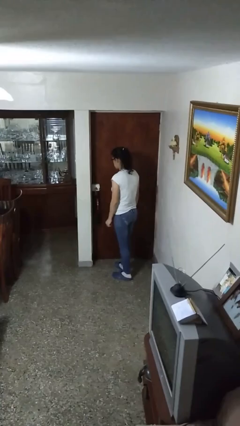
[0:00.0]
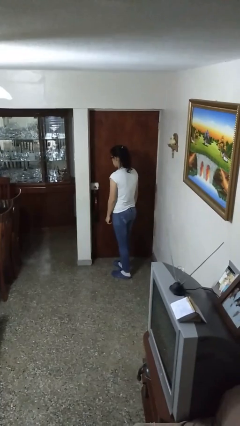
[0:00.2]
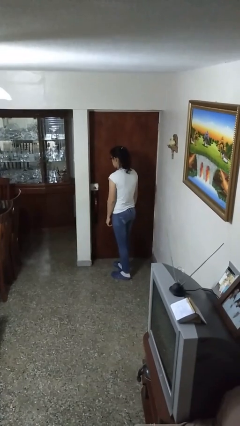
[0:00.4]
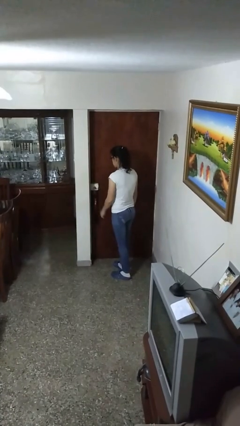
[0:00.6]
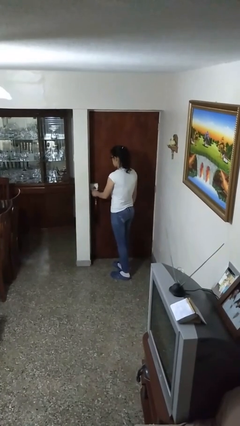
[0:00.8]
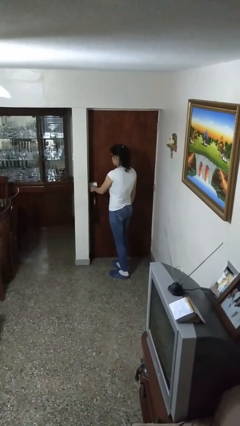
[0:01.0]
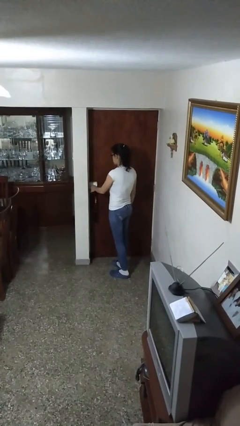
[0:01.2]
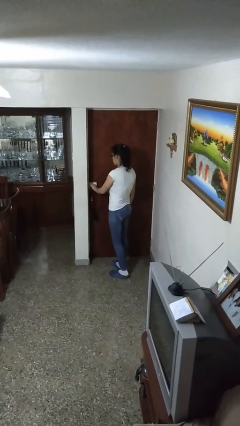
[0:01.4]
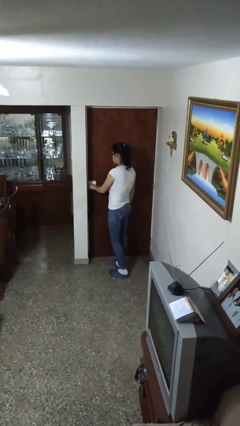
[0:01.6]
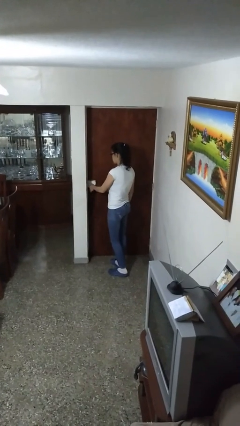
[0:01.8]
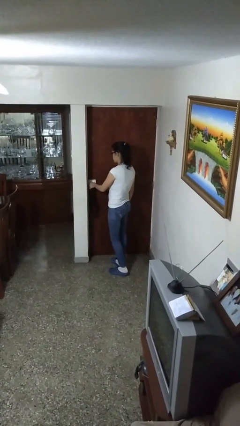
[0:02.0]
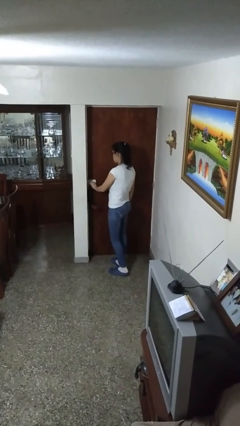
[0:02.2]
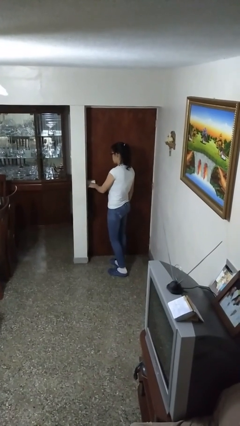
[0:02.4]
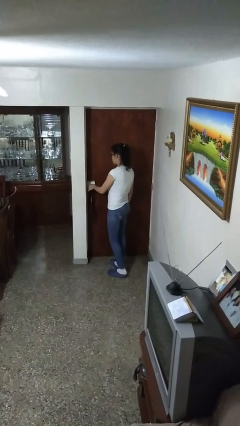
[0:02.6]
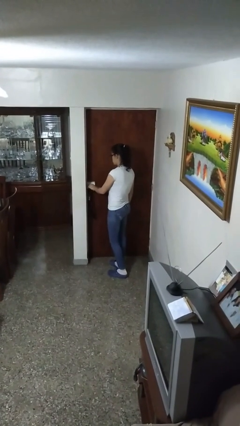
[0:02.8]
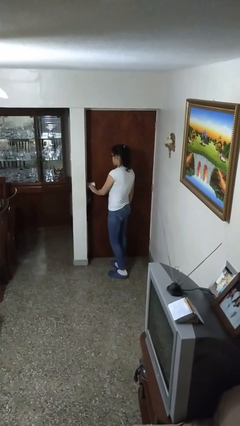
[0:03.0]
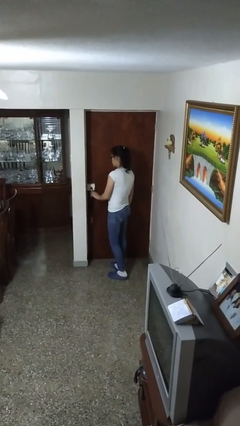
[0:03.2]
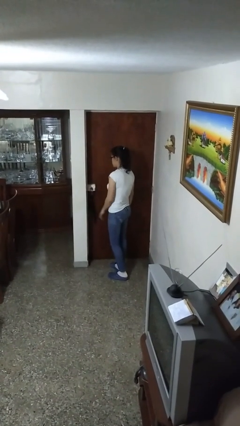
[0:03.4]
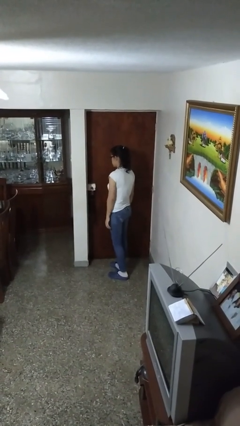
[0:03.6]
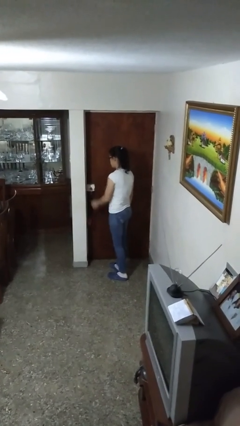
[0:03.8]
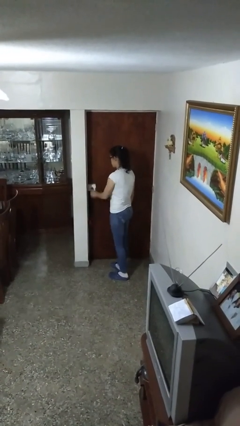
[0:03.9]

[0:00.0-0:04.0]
person unlocks door with keys

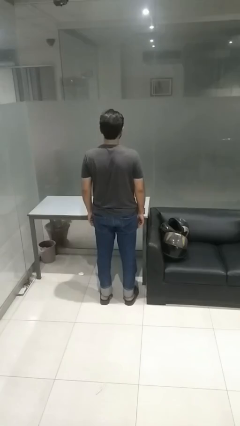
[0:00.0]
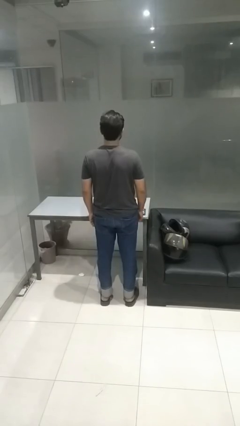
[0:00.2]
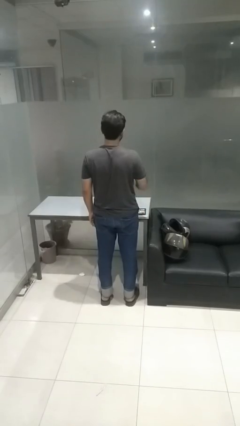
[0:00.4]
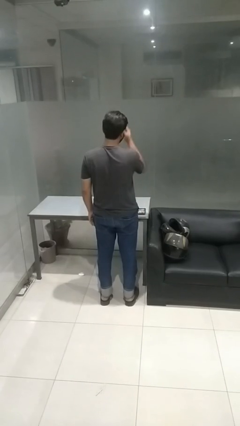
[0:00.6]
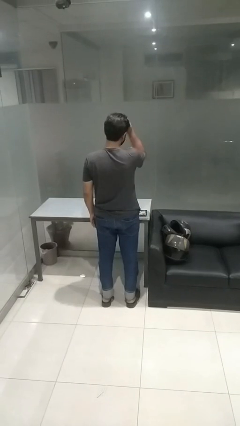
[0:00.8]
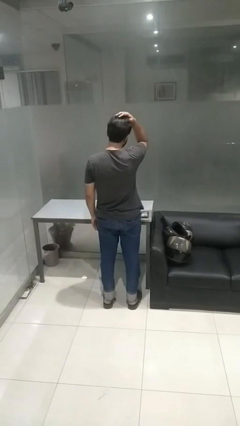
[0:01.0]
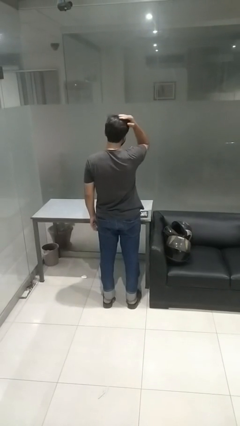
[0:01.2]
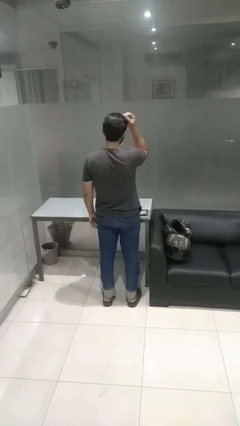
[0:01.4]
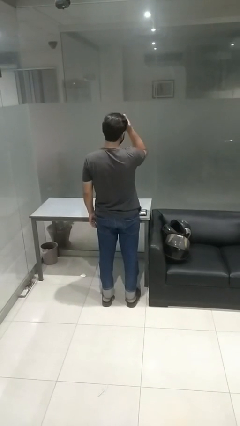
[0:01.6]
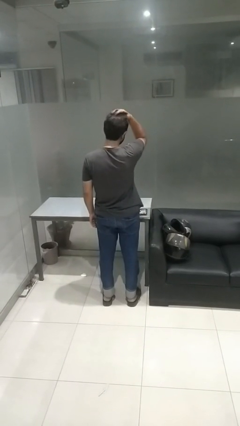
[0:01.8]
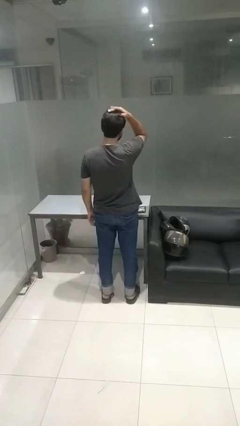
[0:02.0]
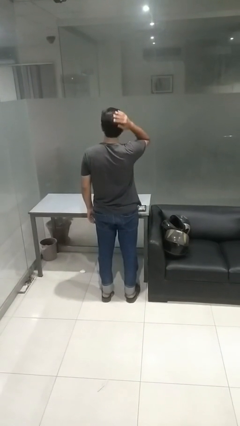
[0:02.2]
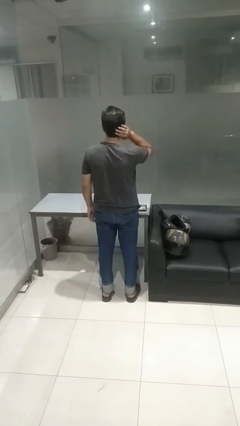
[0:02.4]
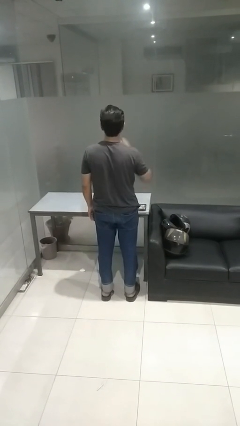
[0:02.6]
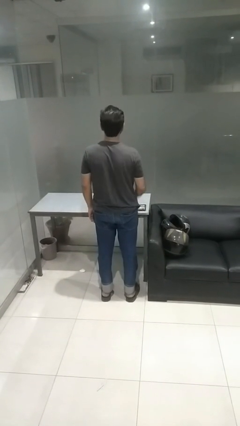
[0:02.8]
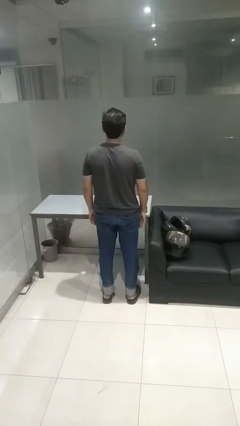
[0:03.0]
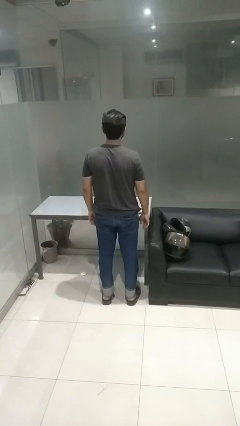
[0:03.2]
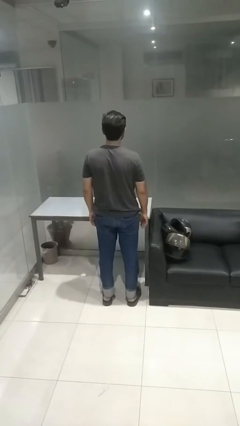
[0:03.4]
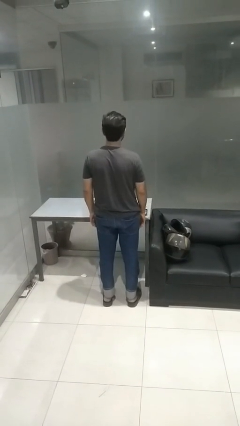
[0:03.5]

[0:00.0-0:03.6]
person strokes hair

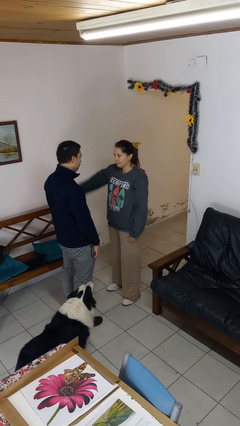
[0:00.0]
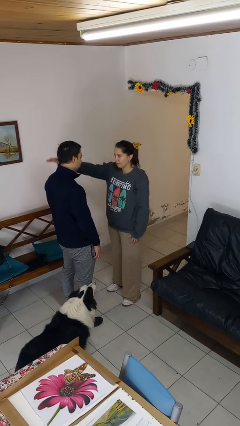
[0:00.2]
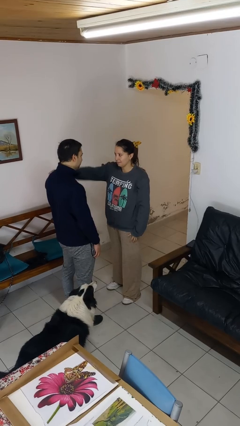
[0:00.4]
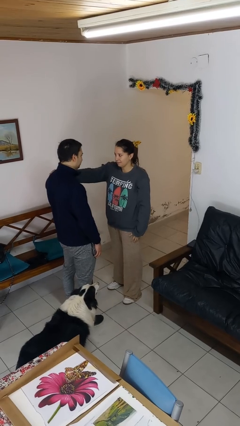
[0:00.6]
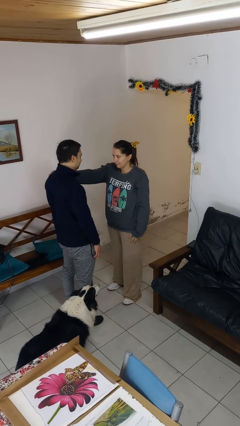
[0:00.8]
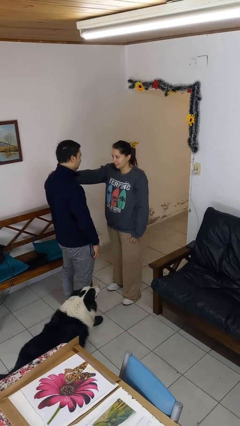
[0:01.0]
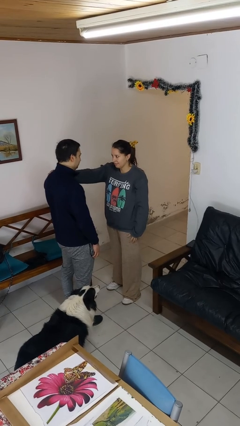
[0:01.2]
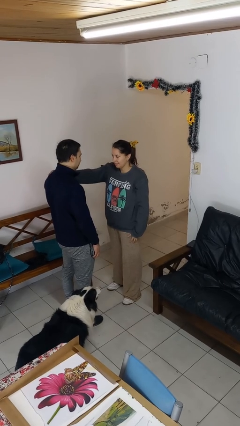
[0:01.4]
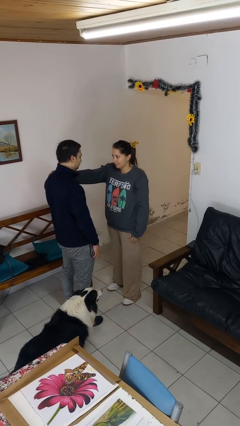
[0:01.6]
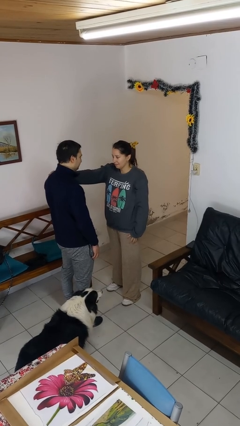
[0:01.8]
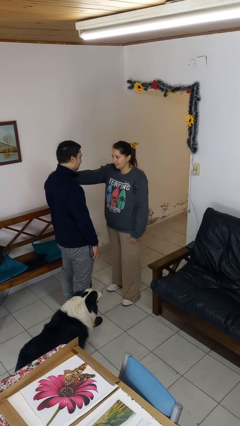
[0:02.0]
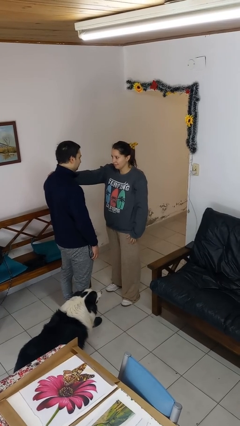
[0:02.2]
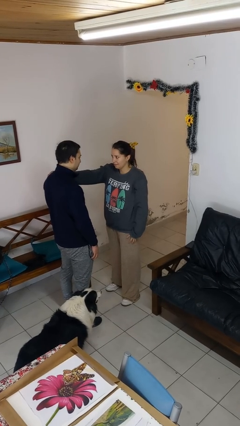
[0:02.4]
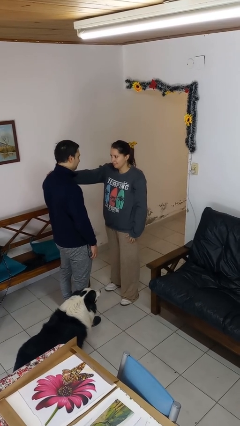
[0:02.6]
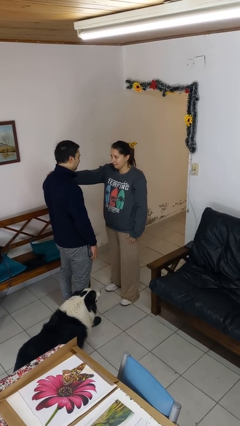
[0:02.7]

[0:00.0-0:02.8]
person pounds shoulders of person

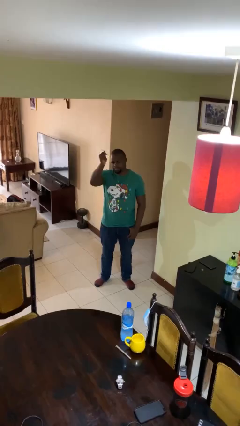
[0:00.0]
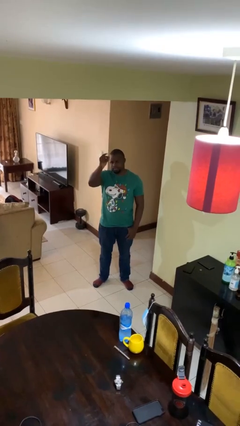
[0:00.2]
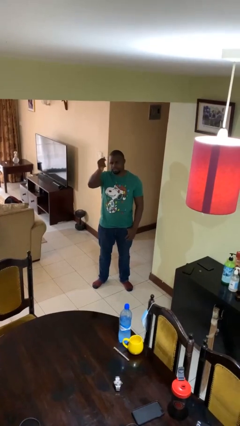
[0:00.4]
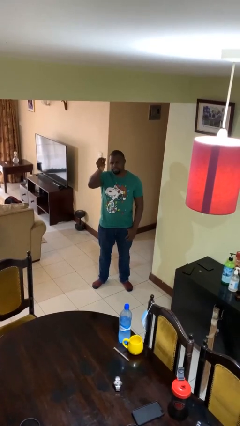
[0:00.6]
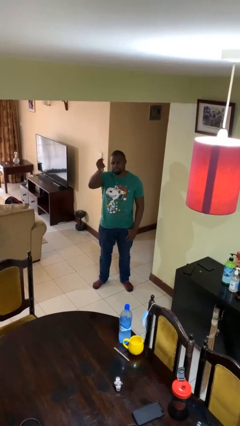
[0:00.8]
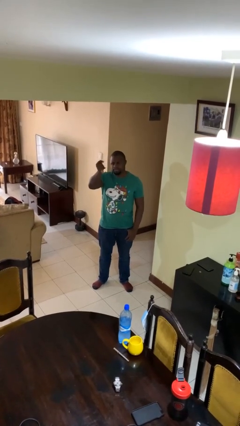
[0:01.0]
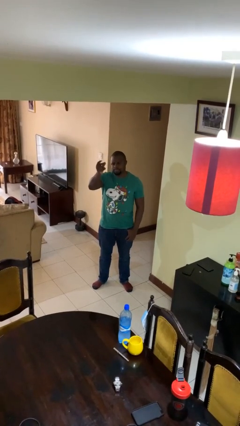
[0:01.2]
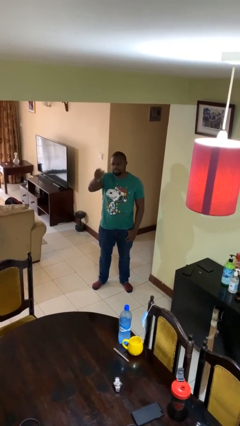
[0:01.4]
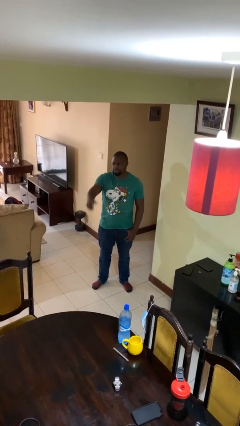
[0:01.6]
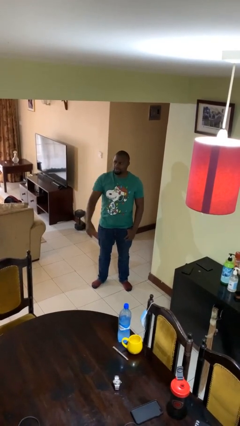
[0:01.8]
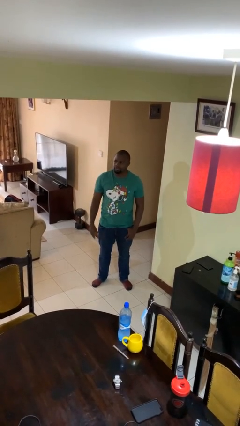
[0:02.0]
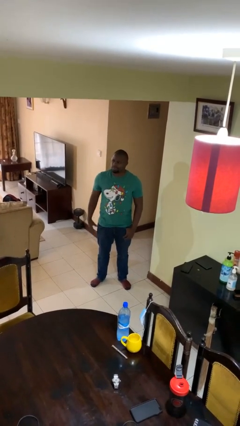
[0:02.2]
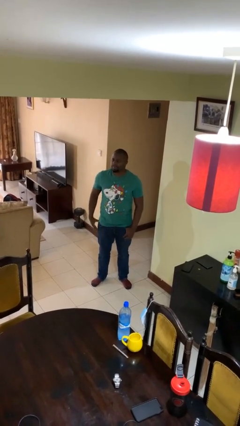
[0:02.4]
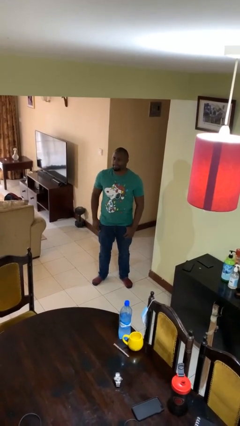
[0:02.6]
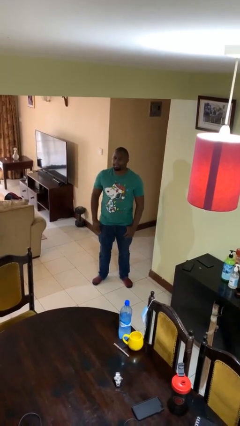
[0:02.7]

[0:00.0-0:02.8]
person snaps fingers

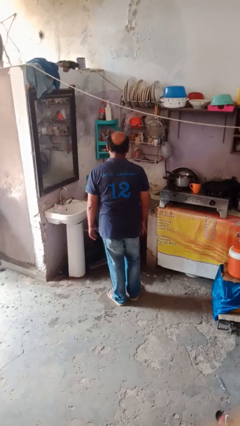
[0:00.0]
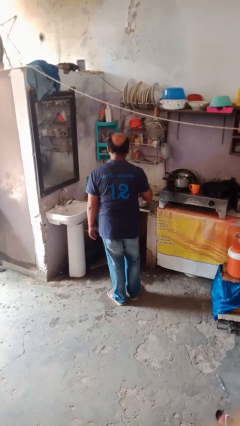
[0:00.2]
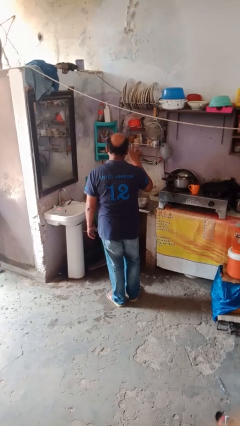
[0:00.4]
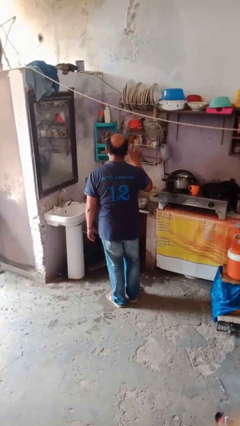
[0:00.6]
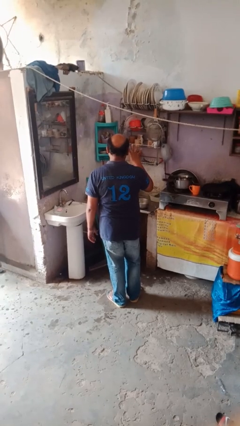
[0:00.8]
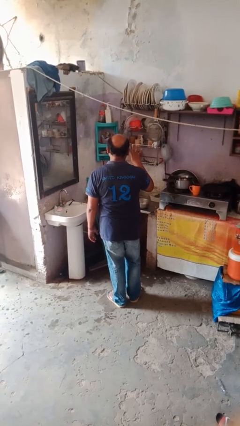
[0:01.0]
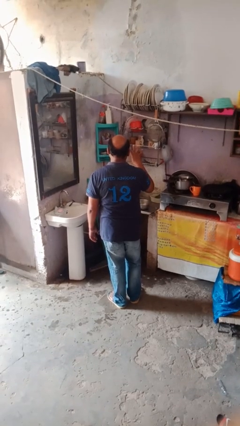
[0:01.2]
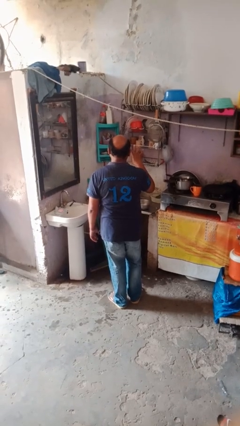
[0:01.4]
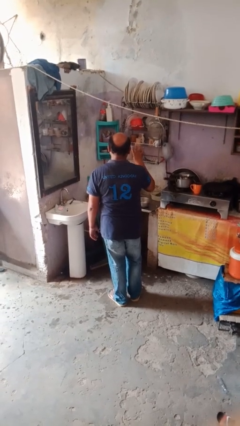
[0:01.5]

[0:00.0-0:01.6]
person gestures number four

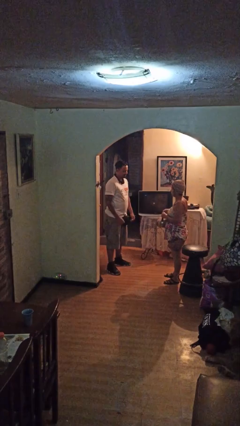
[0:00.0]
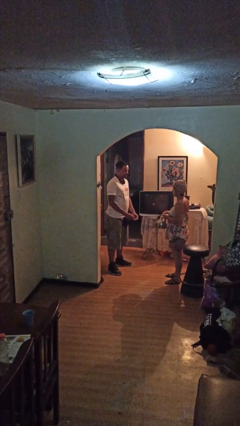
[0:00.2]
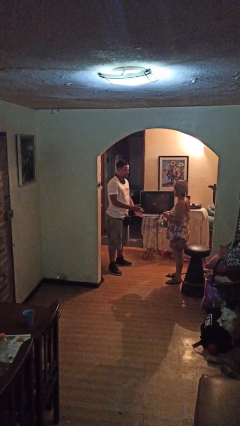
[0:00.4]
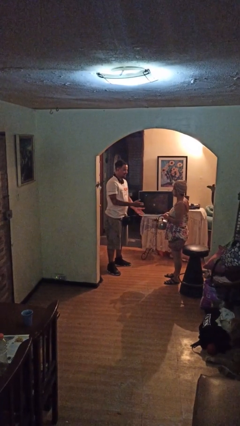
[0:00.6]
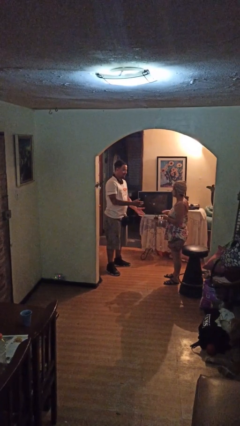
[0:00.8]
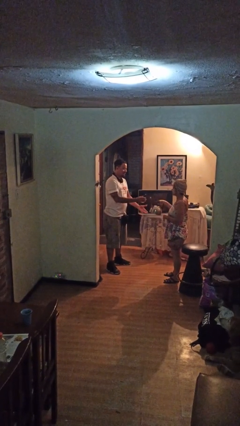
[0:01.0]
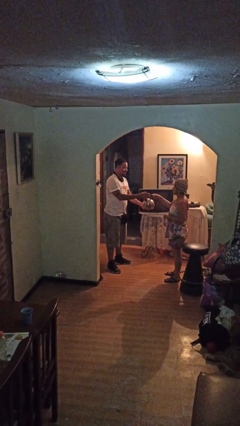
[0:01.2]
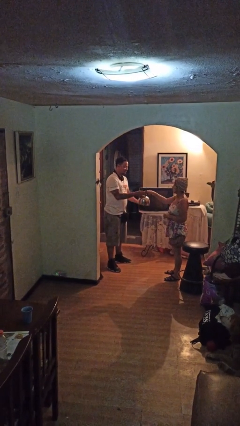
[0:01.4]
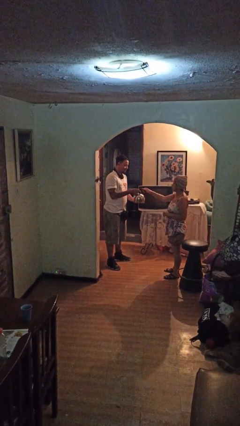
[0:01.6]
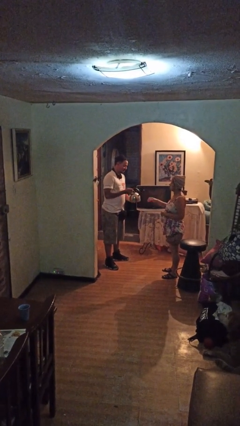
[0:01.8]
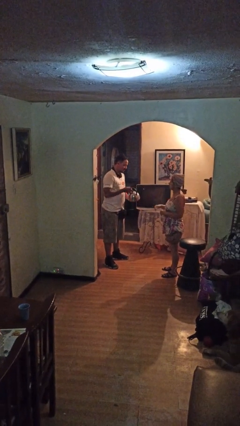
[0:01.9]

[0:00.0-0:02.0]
person transfers object to person

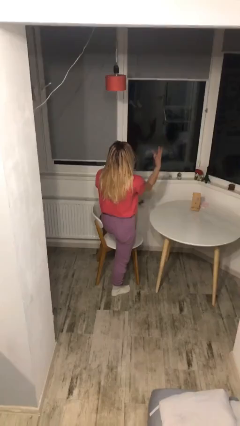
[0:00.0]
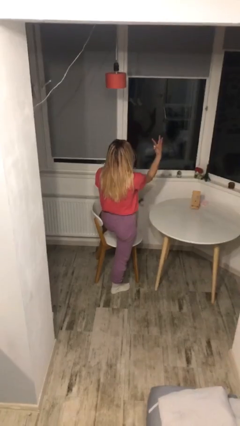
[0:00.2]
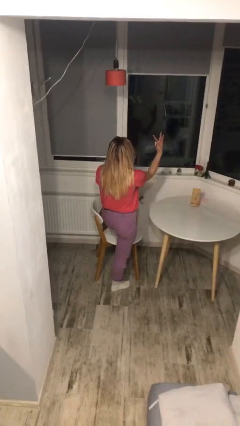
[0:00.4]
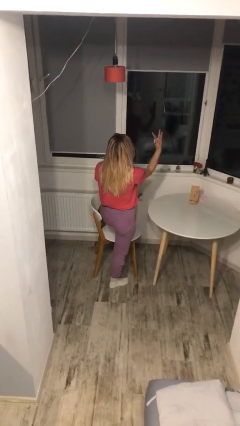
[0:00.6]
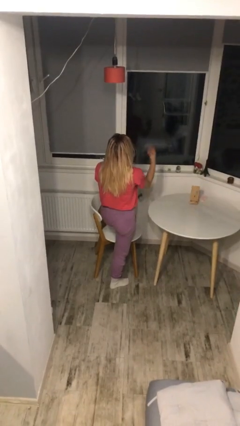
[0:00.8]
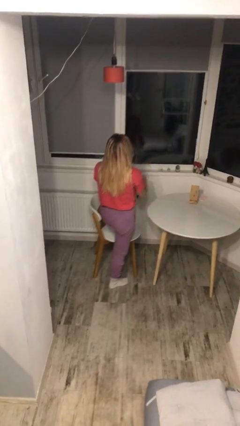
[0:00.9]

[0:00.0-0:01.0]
person gestures number three
